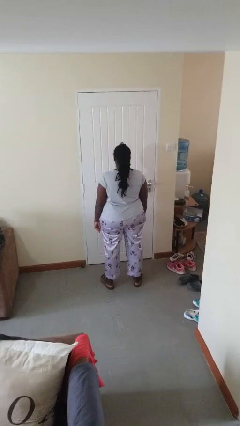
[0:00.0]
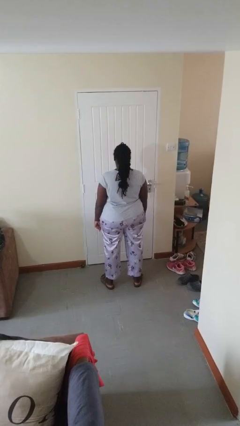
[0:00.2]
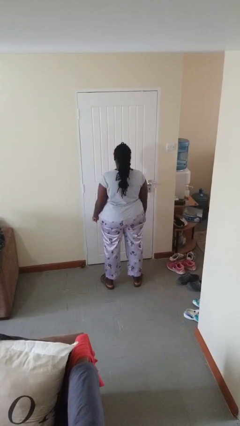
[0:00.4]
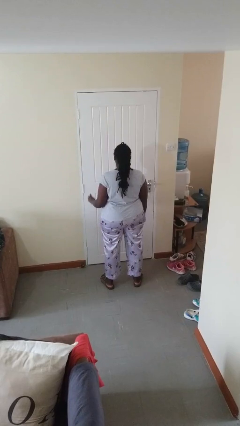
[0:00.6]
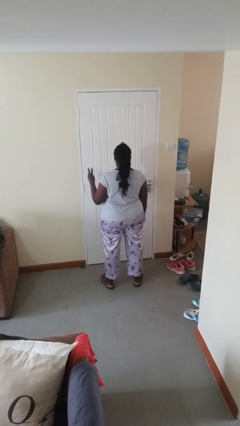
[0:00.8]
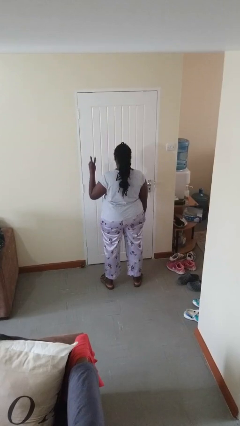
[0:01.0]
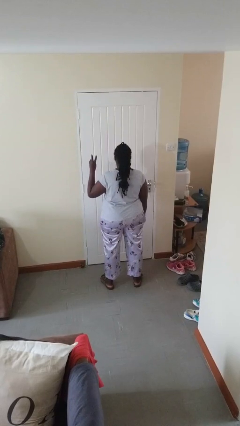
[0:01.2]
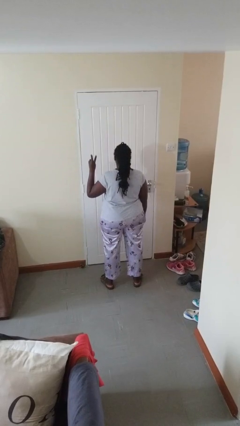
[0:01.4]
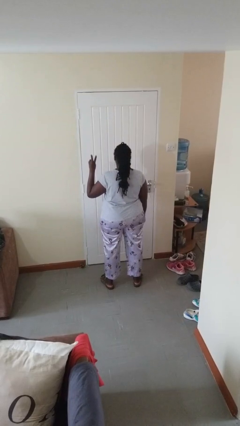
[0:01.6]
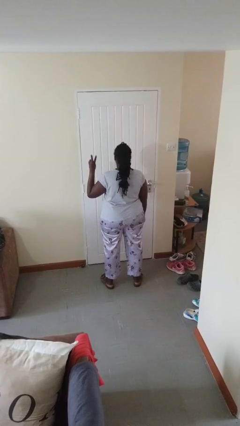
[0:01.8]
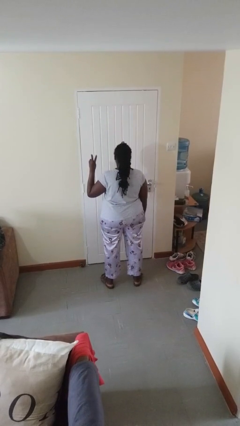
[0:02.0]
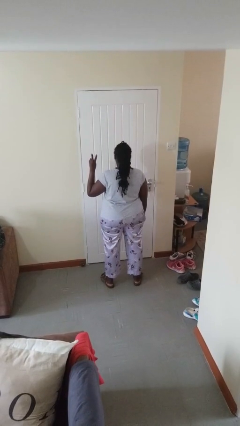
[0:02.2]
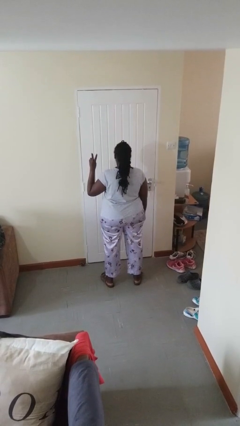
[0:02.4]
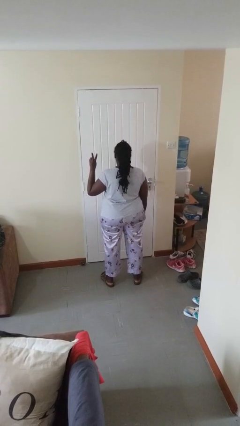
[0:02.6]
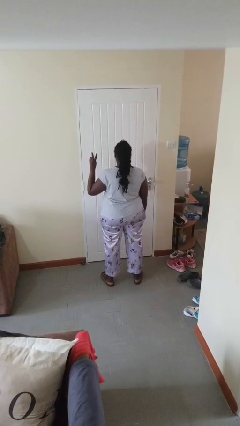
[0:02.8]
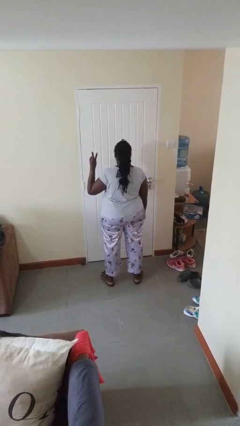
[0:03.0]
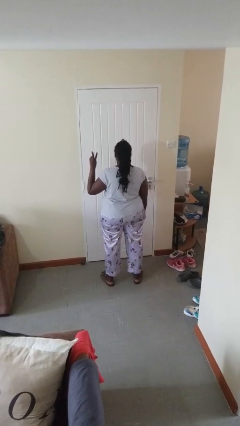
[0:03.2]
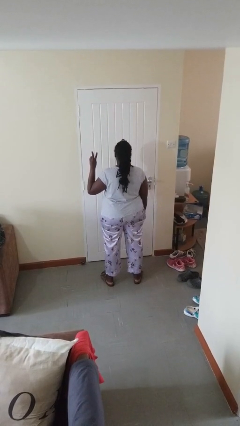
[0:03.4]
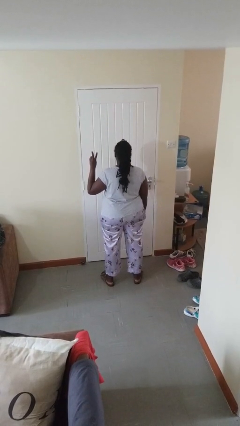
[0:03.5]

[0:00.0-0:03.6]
person gestures peace

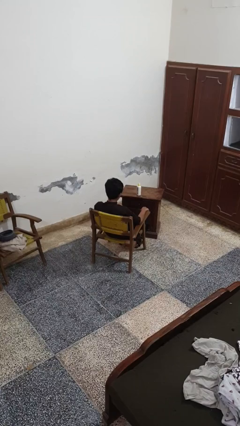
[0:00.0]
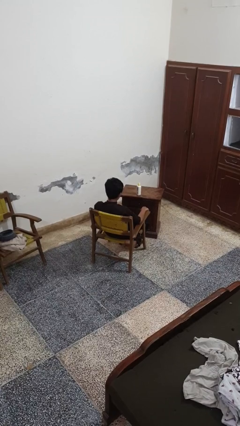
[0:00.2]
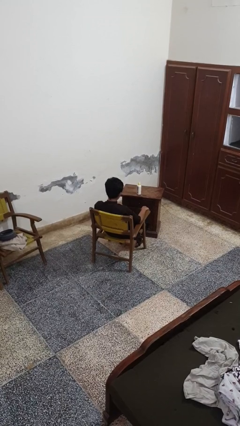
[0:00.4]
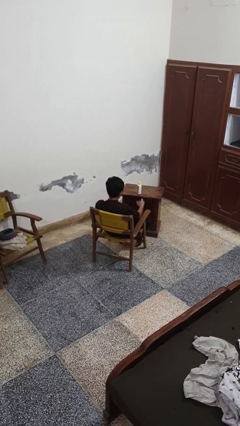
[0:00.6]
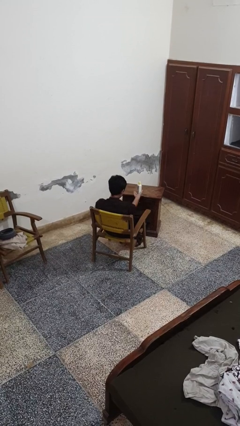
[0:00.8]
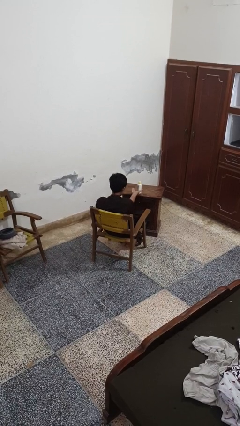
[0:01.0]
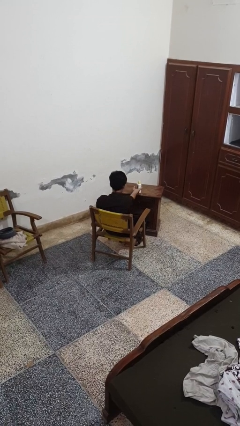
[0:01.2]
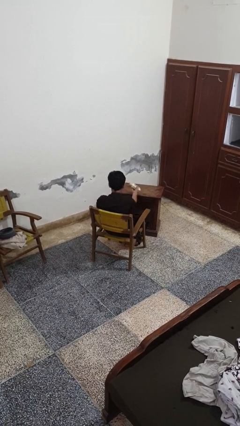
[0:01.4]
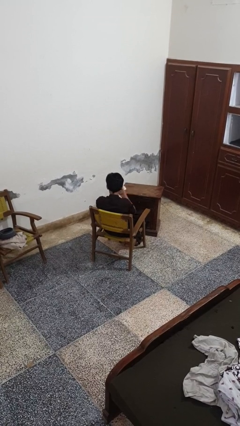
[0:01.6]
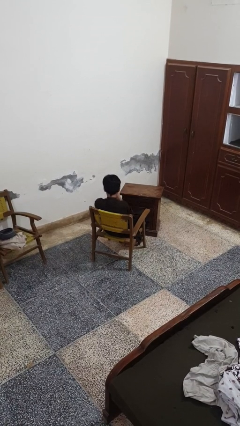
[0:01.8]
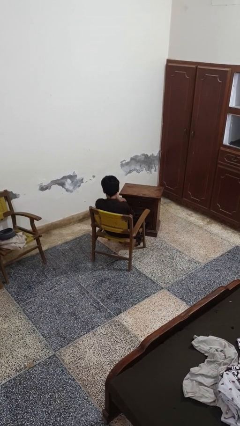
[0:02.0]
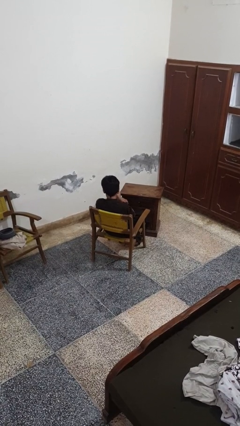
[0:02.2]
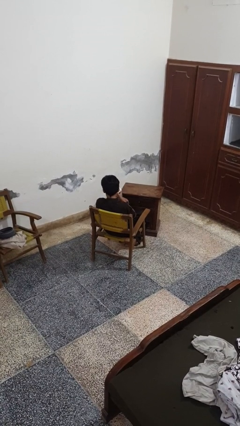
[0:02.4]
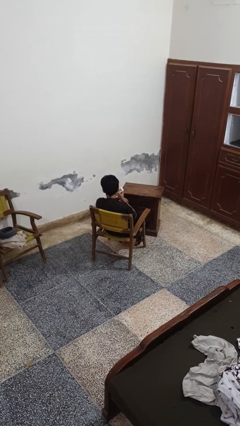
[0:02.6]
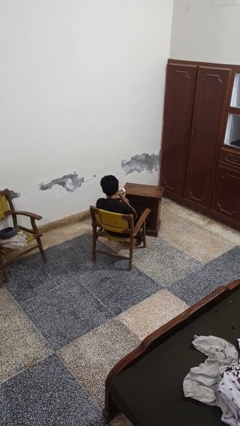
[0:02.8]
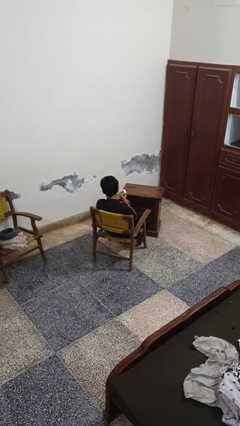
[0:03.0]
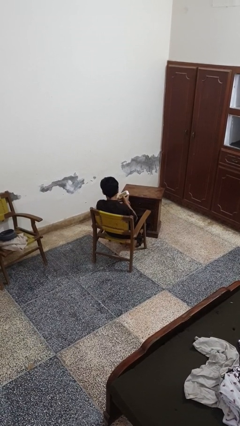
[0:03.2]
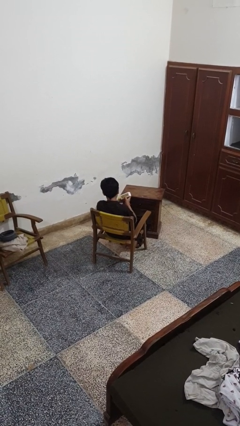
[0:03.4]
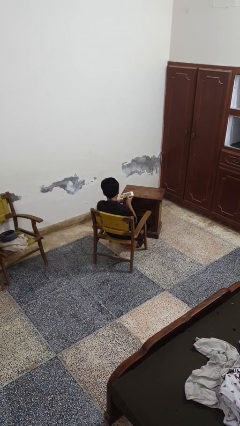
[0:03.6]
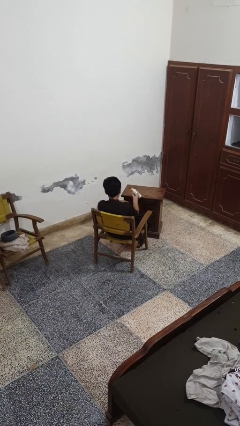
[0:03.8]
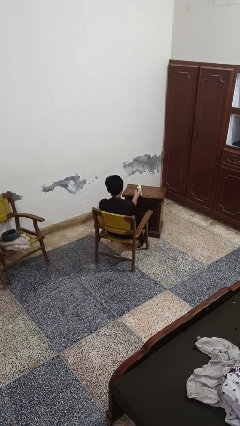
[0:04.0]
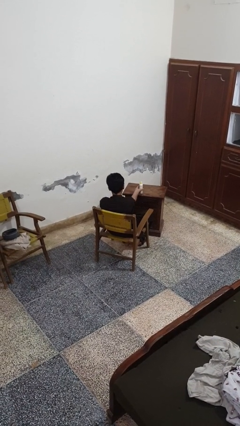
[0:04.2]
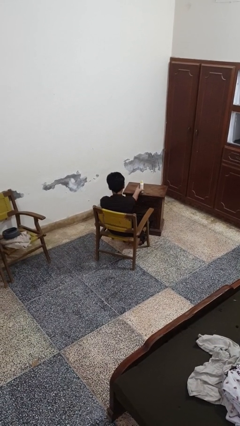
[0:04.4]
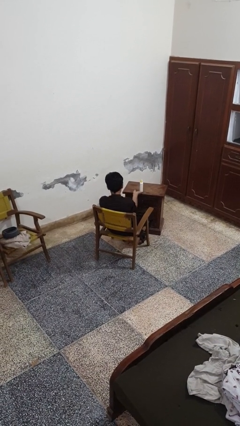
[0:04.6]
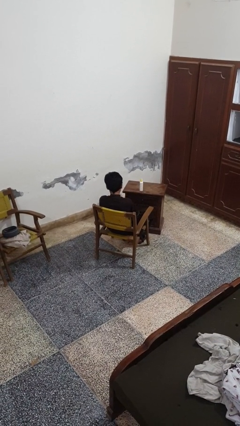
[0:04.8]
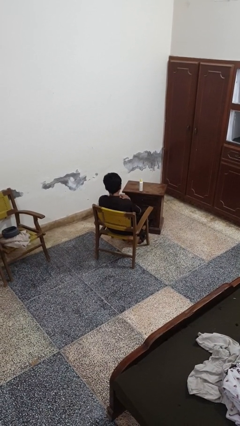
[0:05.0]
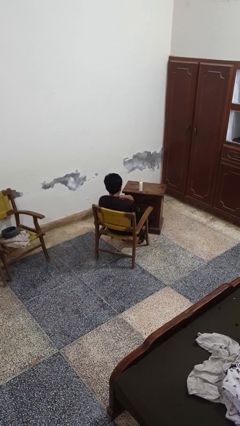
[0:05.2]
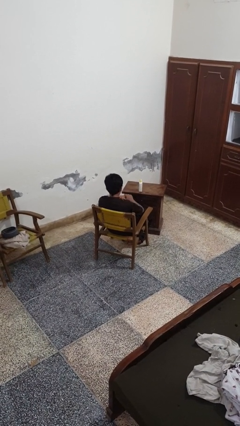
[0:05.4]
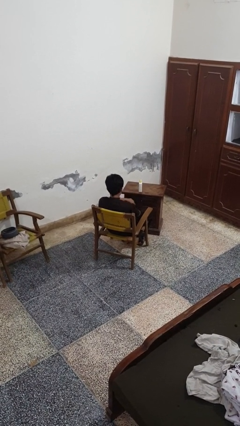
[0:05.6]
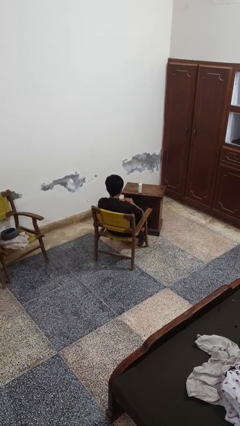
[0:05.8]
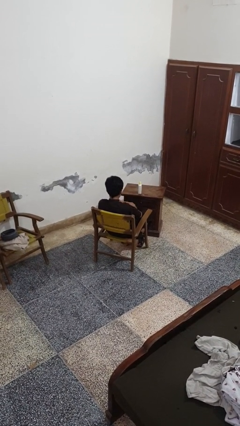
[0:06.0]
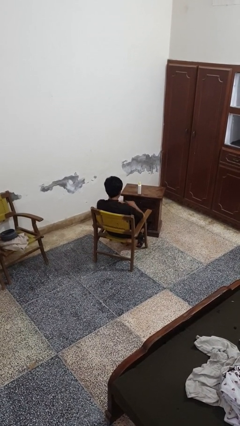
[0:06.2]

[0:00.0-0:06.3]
person applies sunscreen

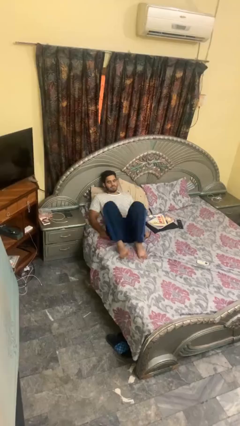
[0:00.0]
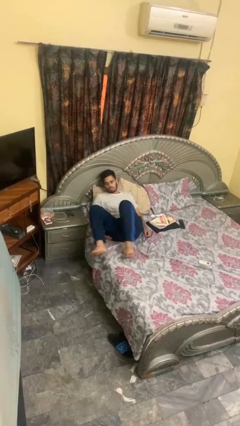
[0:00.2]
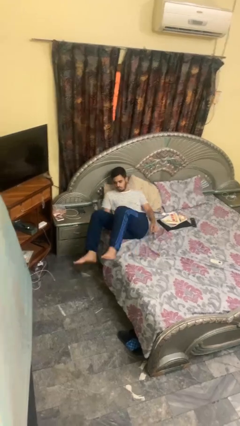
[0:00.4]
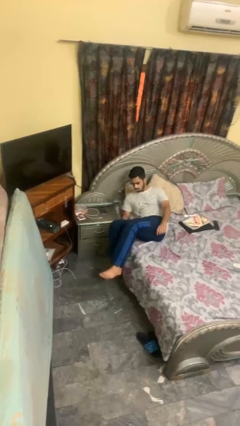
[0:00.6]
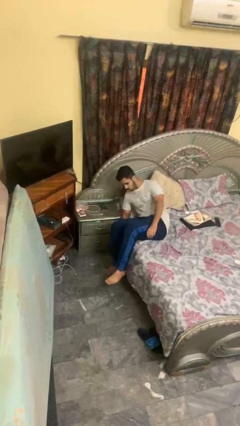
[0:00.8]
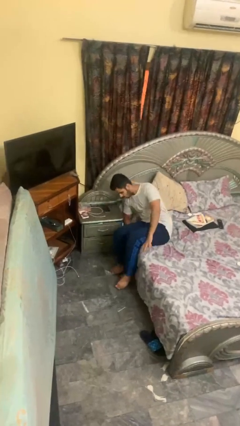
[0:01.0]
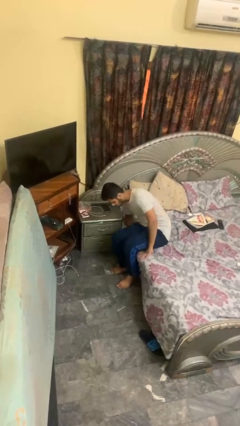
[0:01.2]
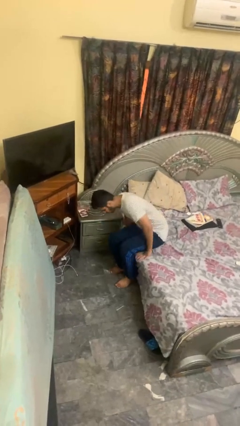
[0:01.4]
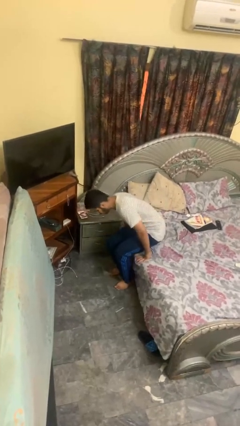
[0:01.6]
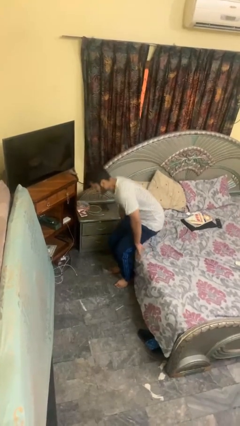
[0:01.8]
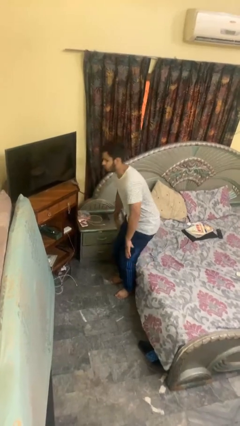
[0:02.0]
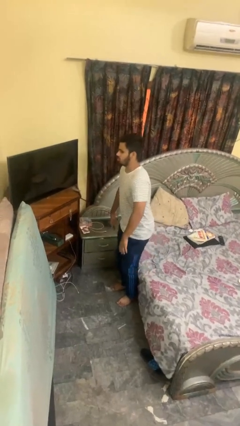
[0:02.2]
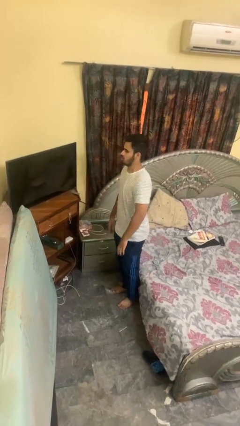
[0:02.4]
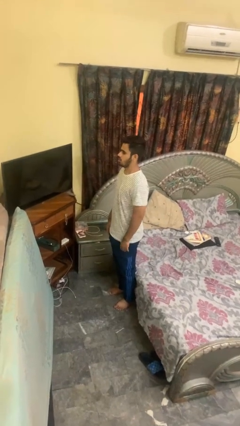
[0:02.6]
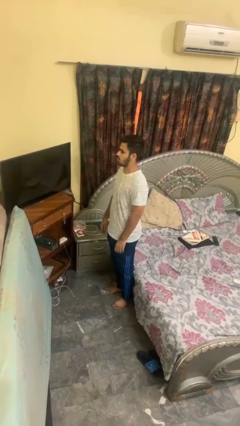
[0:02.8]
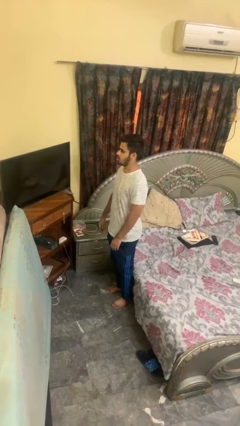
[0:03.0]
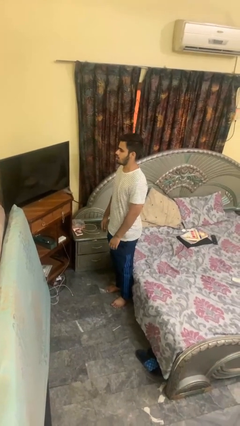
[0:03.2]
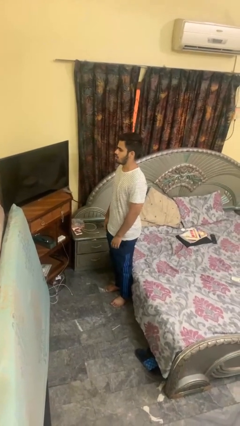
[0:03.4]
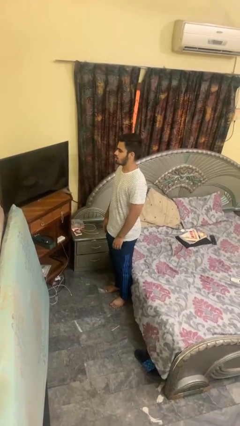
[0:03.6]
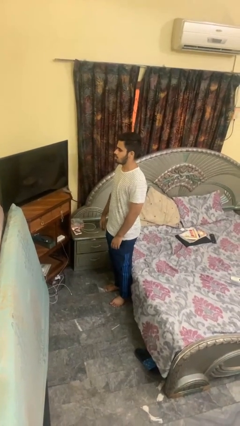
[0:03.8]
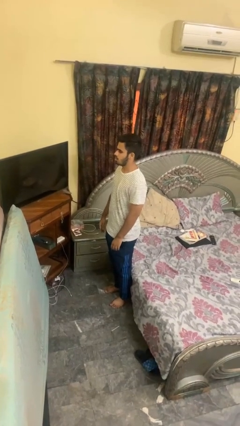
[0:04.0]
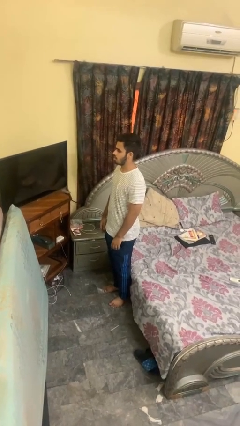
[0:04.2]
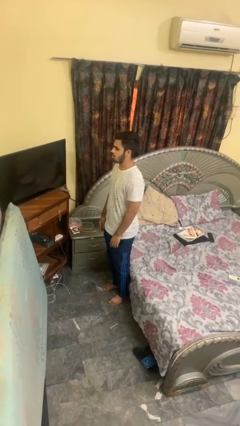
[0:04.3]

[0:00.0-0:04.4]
person stands up

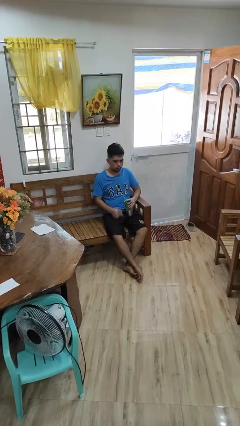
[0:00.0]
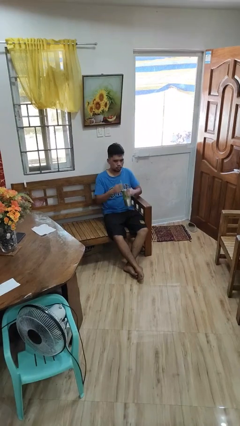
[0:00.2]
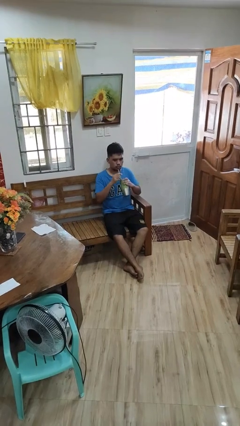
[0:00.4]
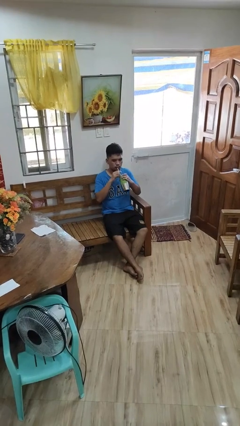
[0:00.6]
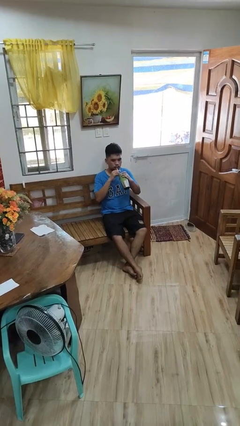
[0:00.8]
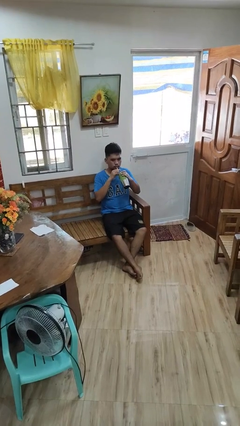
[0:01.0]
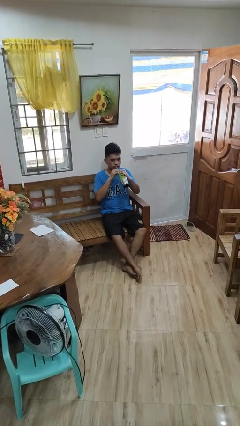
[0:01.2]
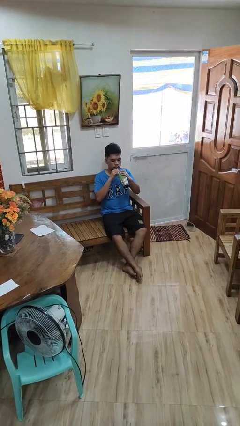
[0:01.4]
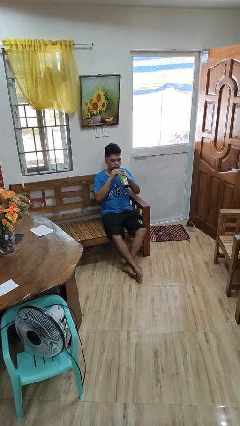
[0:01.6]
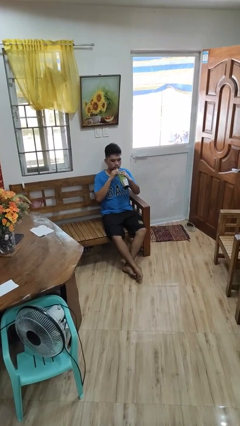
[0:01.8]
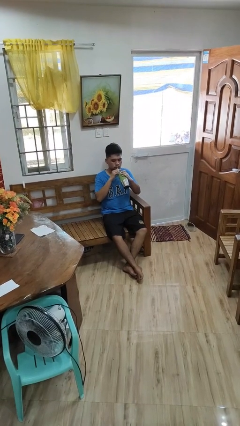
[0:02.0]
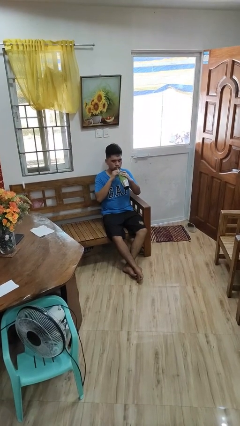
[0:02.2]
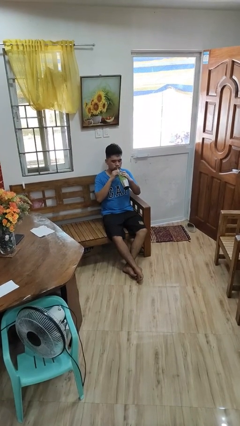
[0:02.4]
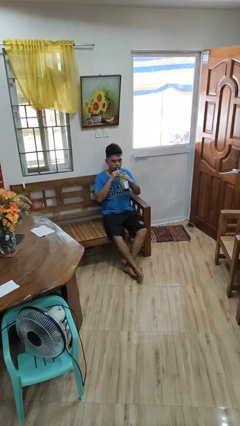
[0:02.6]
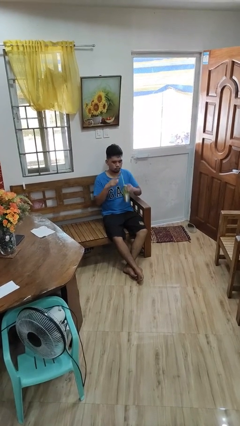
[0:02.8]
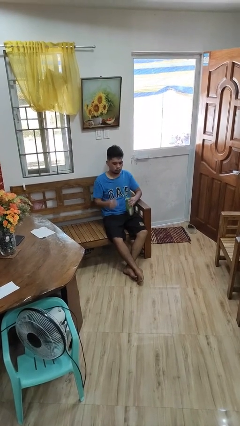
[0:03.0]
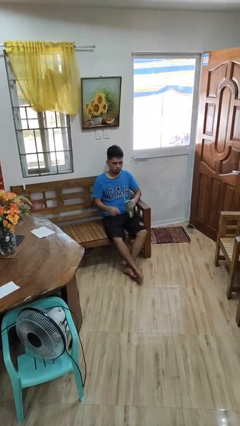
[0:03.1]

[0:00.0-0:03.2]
person drinks from straw
